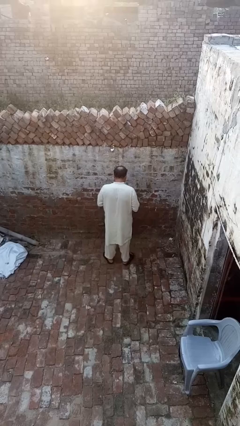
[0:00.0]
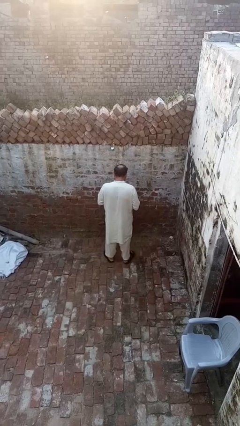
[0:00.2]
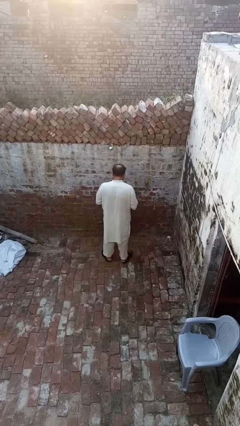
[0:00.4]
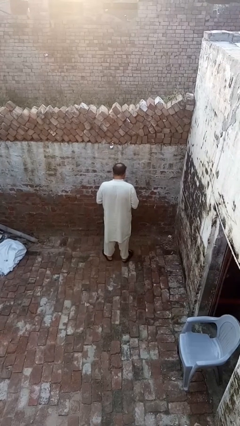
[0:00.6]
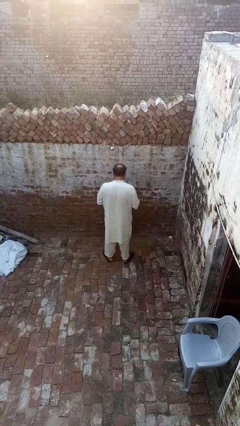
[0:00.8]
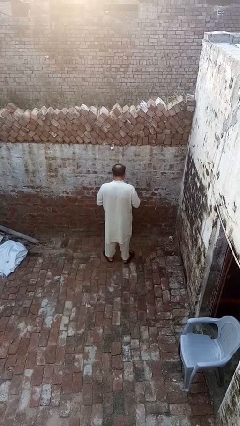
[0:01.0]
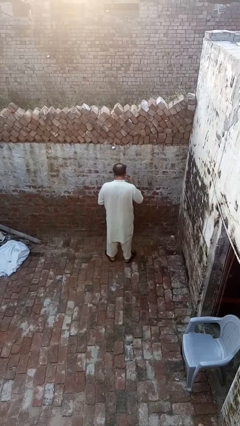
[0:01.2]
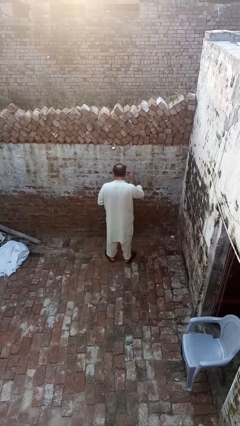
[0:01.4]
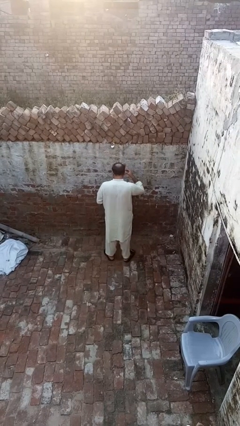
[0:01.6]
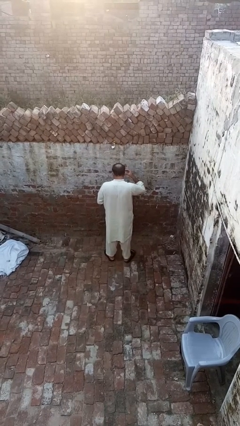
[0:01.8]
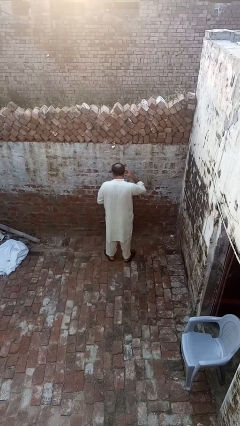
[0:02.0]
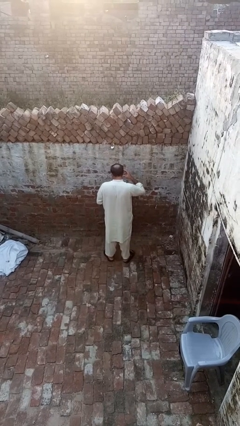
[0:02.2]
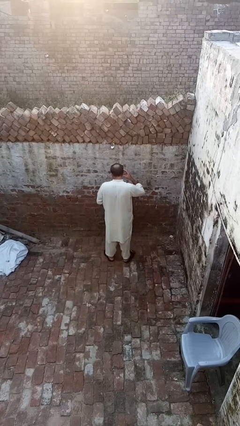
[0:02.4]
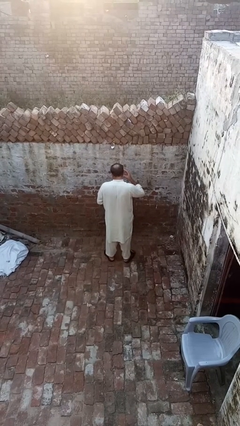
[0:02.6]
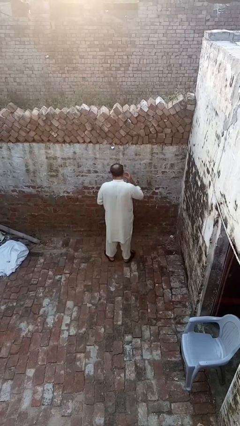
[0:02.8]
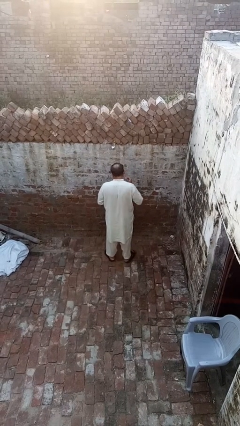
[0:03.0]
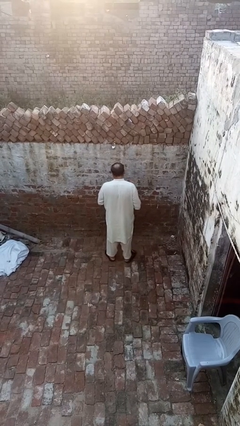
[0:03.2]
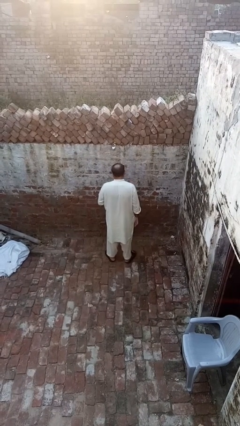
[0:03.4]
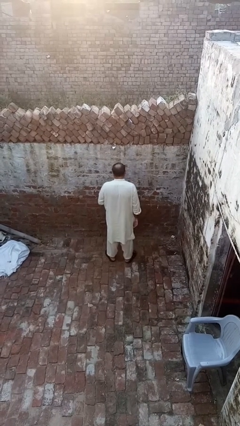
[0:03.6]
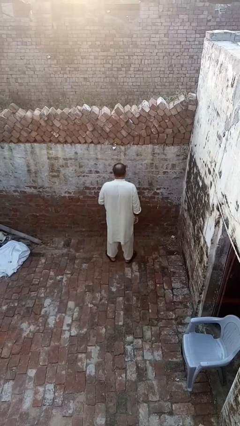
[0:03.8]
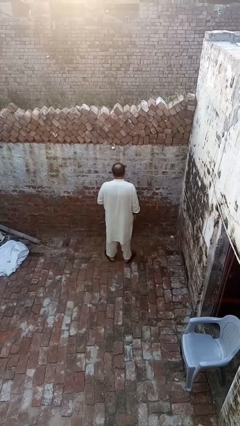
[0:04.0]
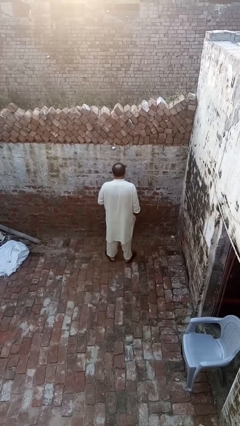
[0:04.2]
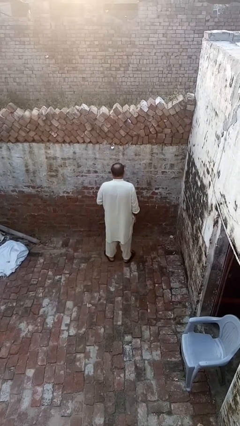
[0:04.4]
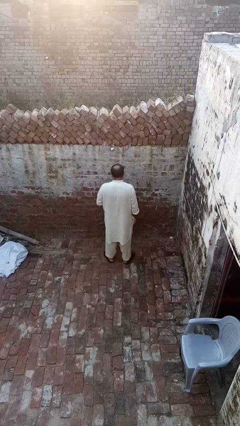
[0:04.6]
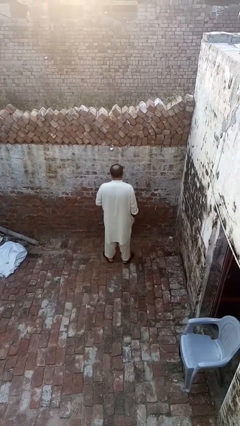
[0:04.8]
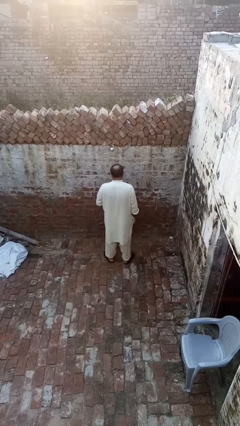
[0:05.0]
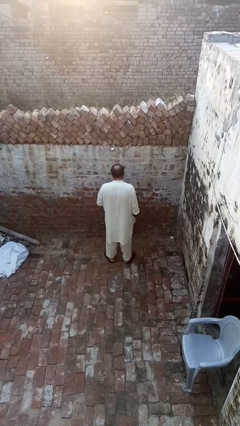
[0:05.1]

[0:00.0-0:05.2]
person puts on earrings

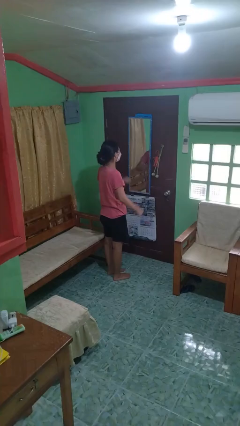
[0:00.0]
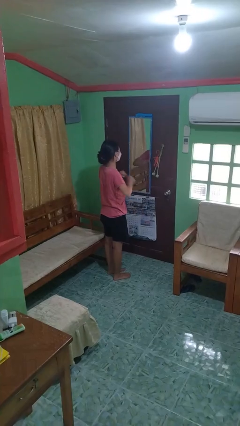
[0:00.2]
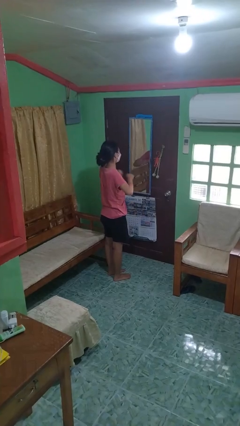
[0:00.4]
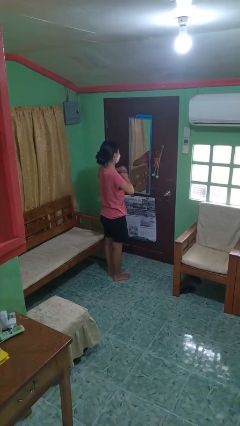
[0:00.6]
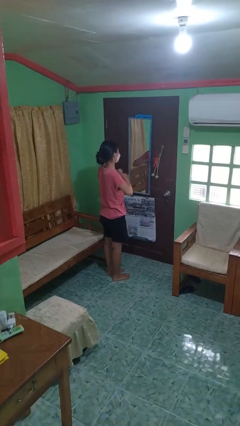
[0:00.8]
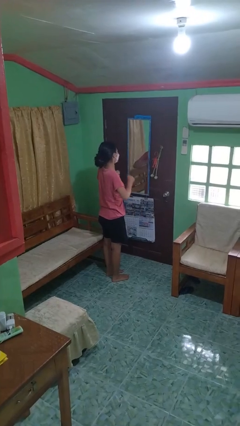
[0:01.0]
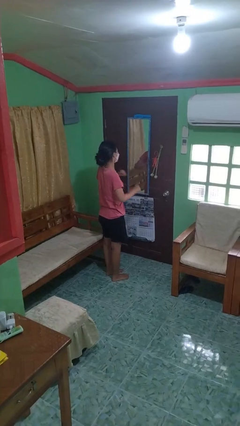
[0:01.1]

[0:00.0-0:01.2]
person drums on chest

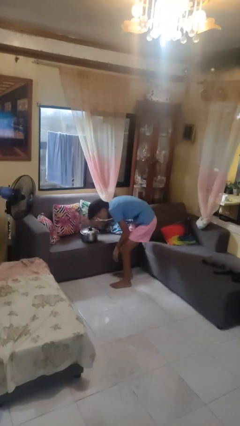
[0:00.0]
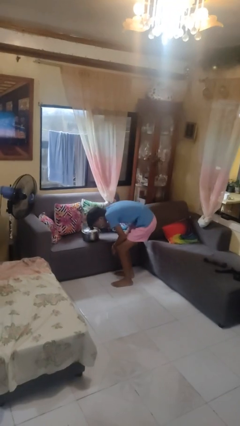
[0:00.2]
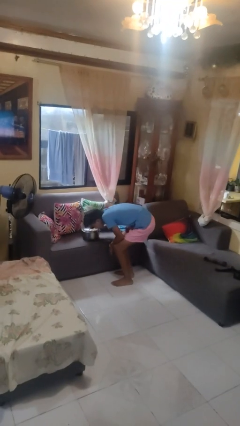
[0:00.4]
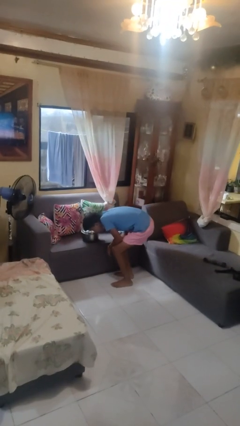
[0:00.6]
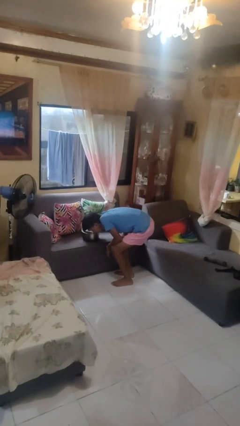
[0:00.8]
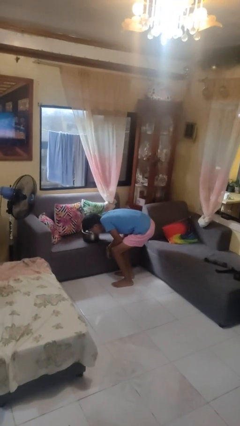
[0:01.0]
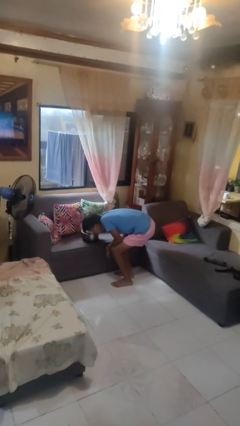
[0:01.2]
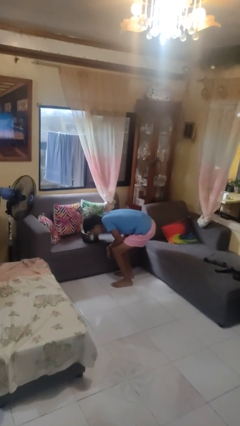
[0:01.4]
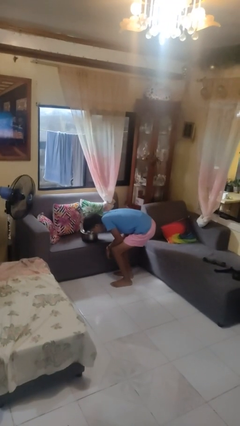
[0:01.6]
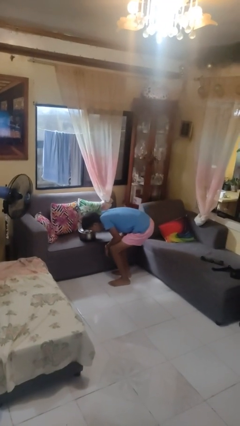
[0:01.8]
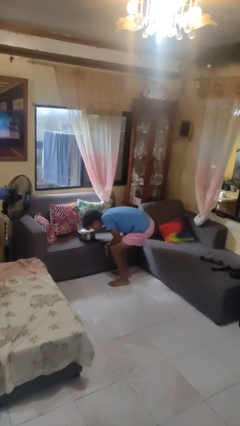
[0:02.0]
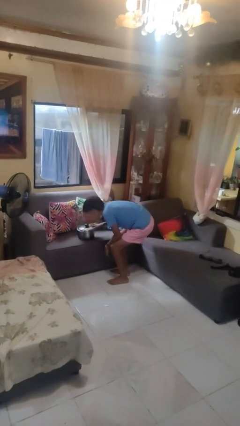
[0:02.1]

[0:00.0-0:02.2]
person taps object with finger

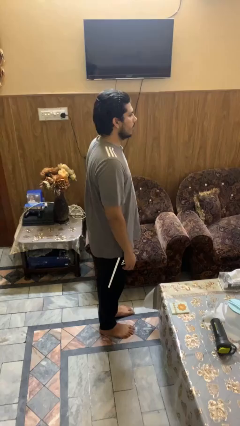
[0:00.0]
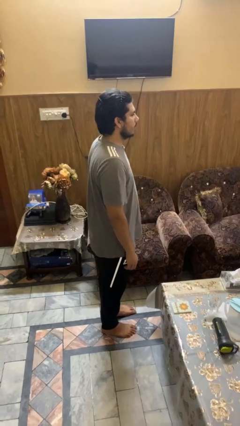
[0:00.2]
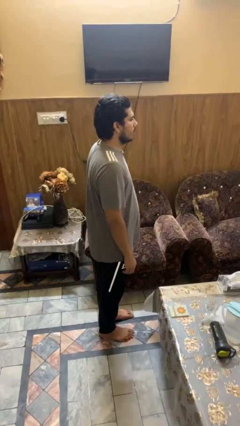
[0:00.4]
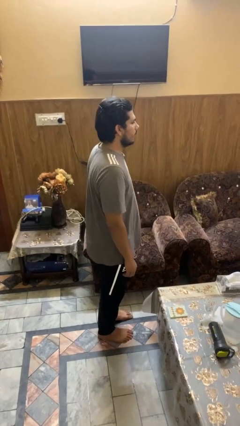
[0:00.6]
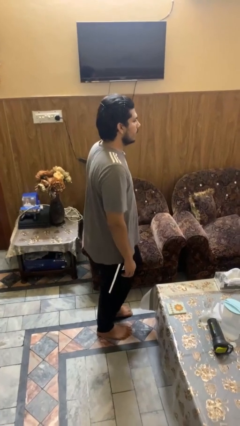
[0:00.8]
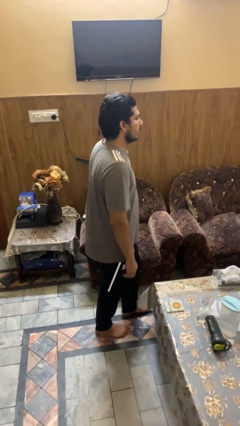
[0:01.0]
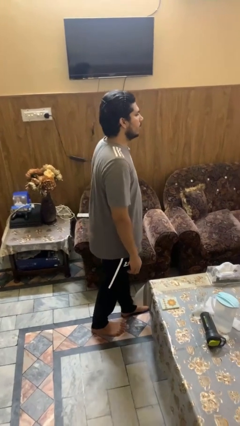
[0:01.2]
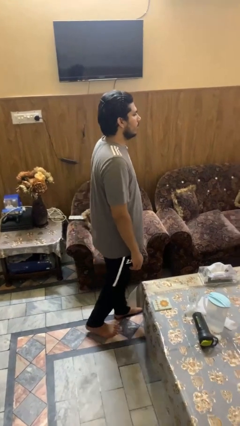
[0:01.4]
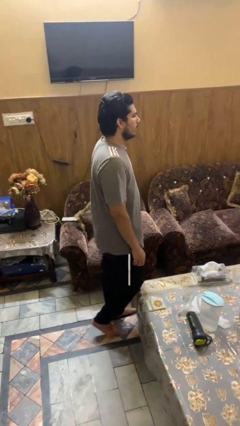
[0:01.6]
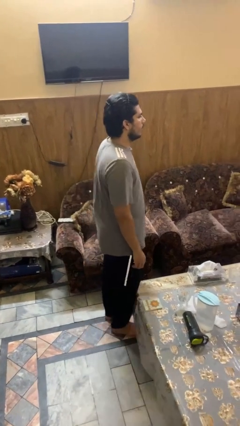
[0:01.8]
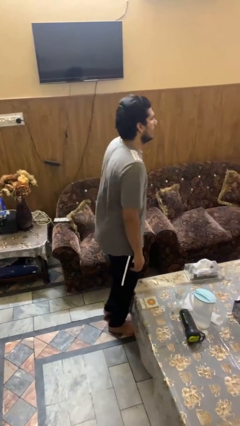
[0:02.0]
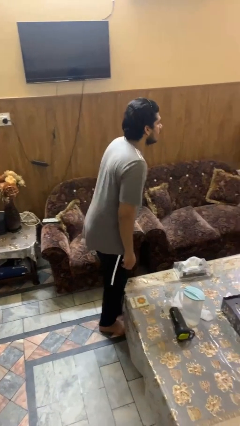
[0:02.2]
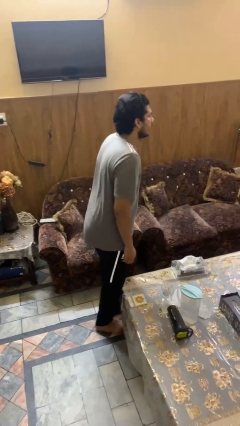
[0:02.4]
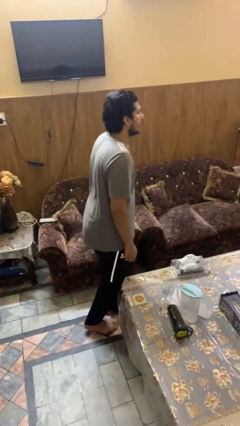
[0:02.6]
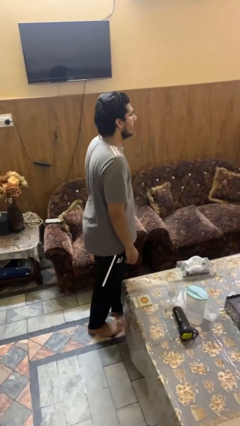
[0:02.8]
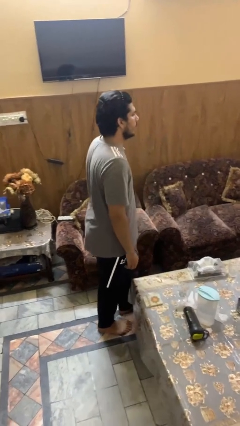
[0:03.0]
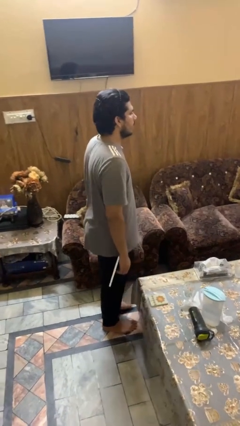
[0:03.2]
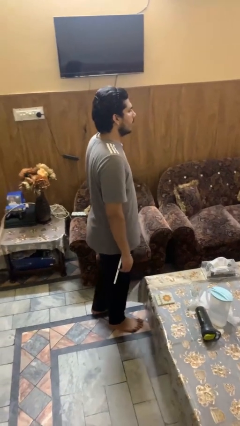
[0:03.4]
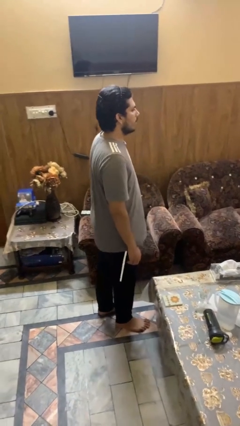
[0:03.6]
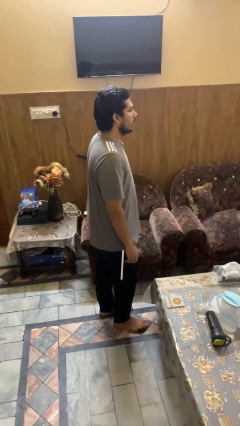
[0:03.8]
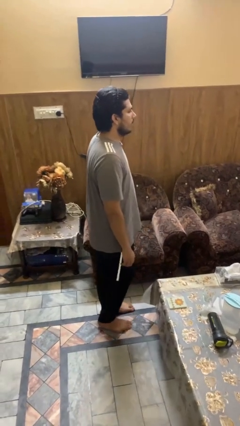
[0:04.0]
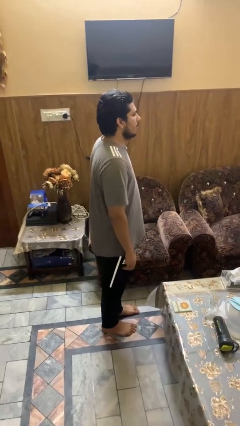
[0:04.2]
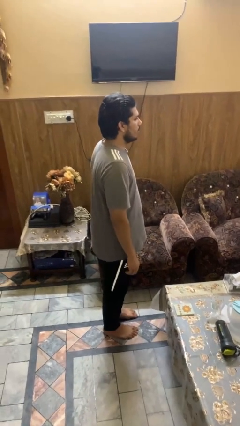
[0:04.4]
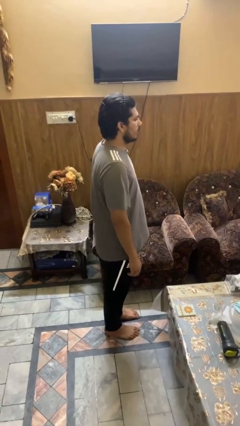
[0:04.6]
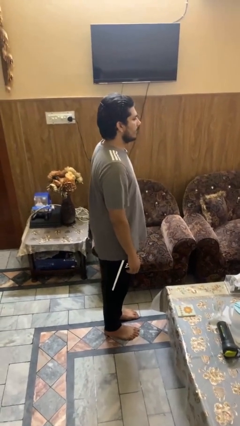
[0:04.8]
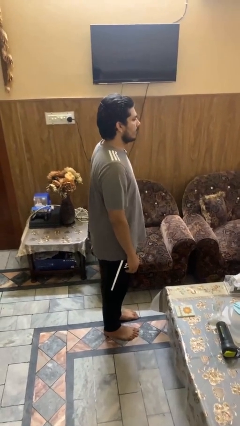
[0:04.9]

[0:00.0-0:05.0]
person bumps into table

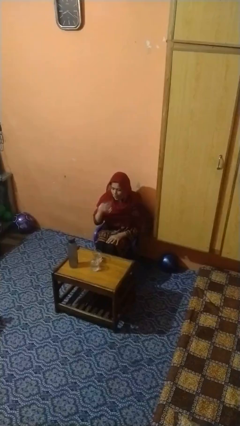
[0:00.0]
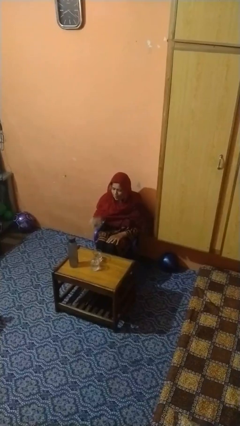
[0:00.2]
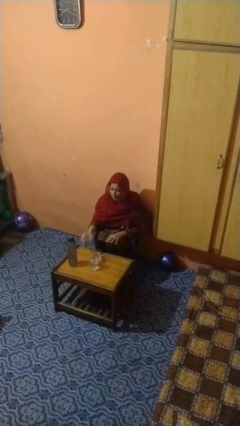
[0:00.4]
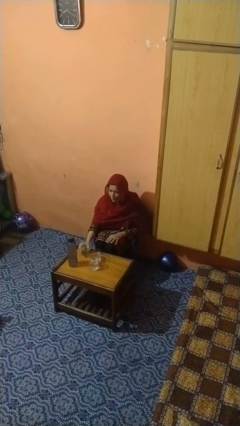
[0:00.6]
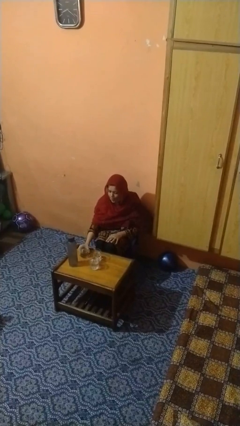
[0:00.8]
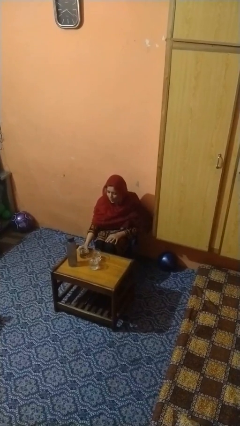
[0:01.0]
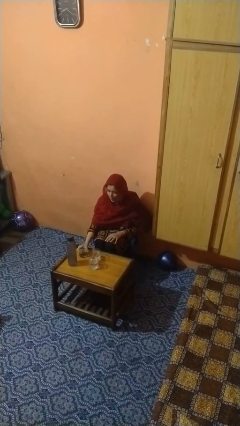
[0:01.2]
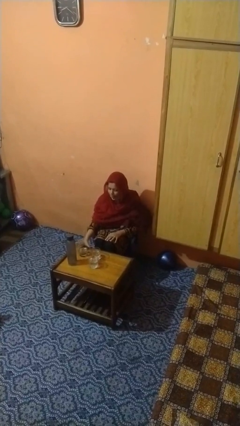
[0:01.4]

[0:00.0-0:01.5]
person puts down object on table

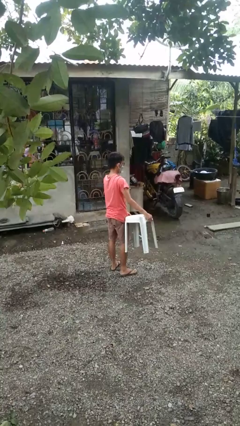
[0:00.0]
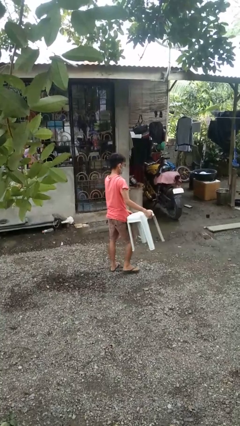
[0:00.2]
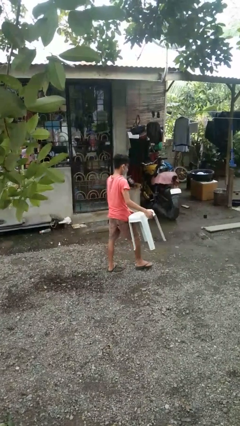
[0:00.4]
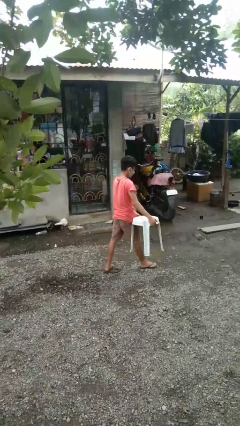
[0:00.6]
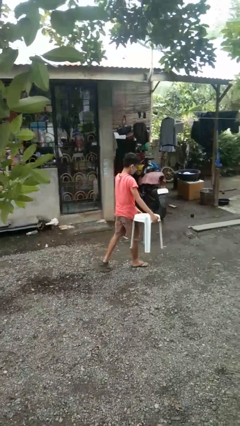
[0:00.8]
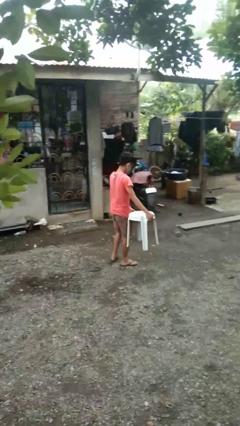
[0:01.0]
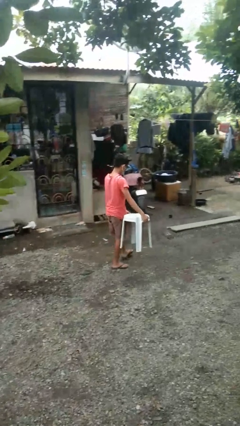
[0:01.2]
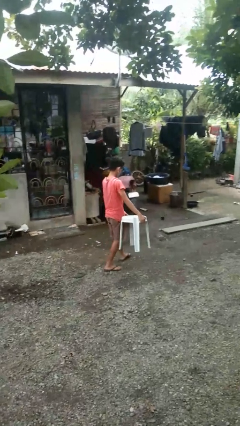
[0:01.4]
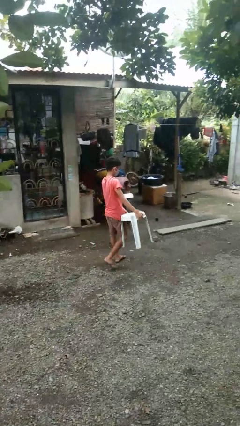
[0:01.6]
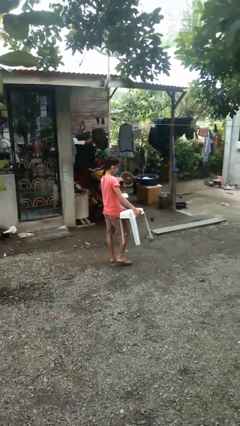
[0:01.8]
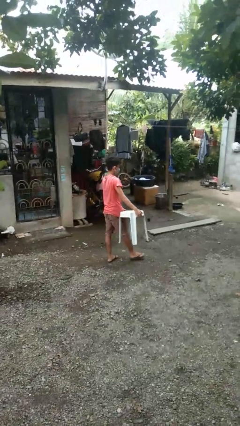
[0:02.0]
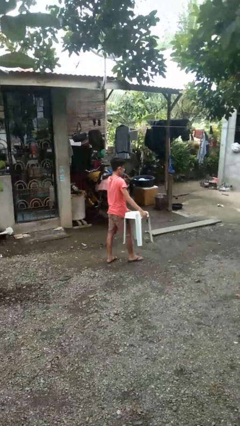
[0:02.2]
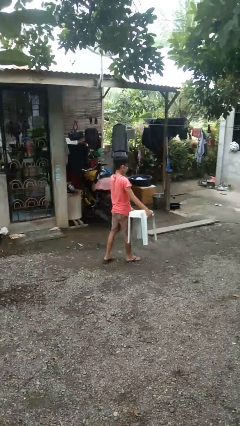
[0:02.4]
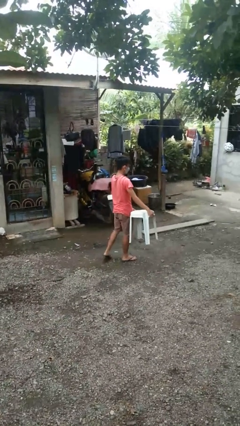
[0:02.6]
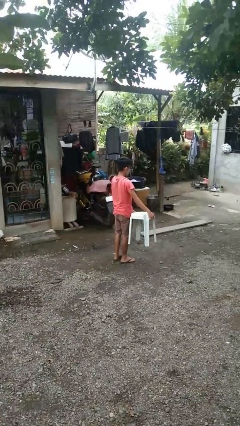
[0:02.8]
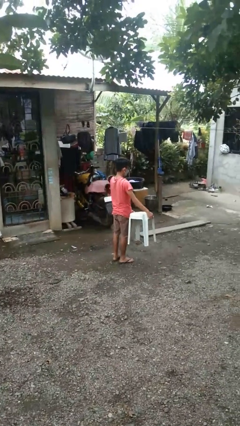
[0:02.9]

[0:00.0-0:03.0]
person carries furniture
